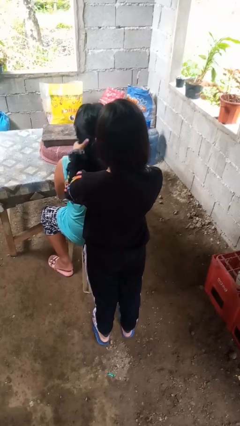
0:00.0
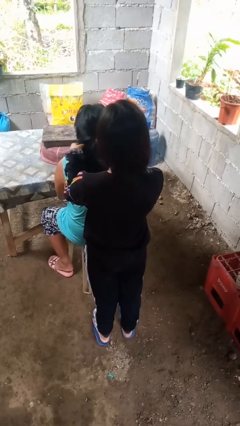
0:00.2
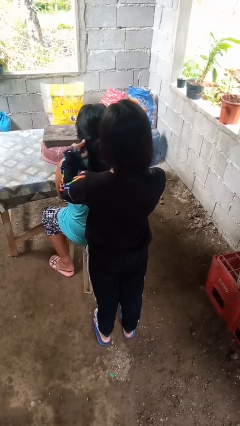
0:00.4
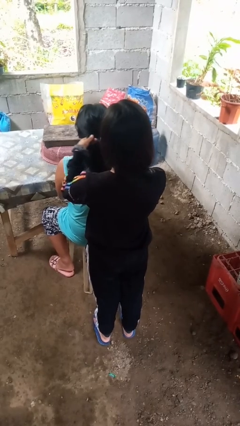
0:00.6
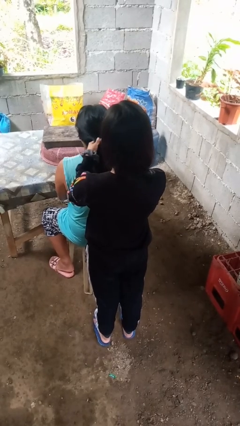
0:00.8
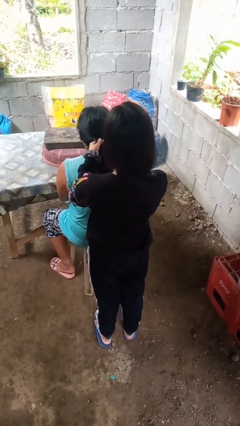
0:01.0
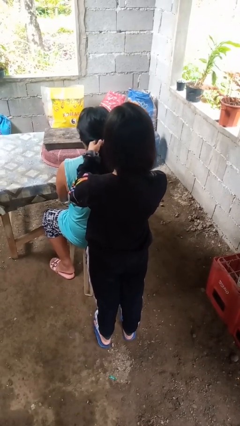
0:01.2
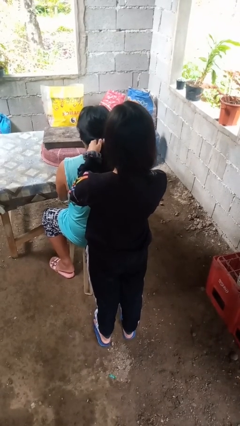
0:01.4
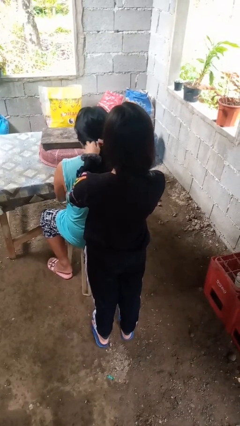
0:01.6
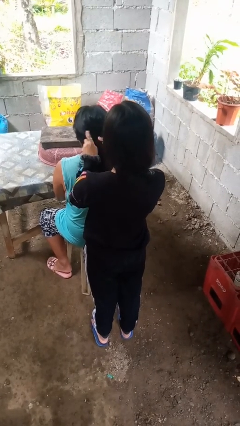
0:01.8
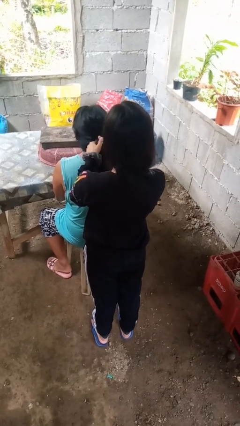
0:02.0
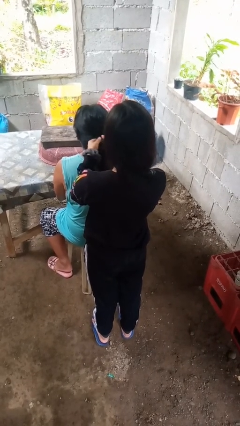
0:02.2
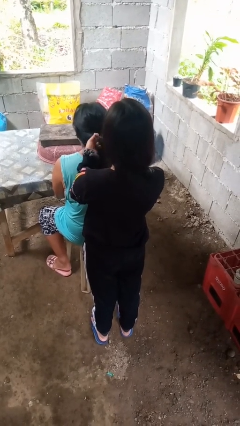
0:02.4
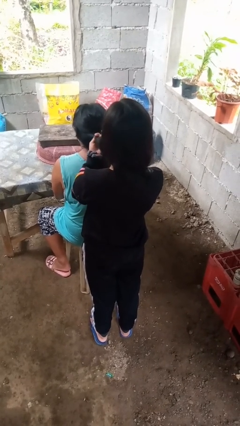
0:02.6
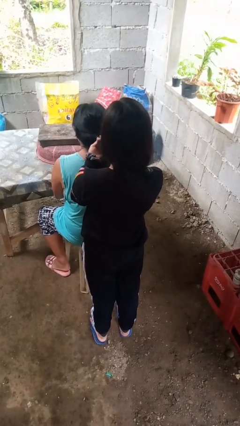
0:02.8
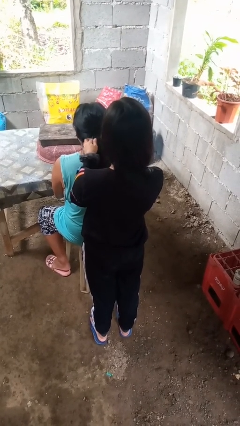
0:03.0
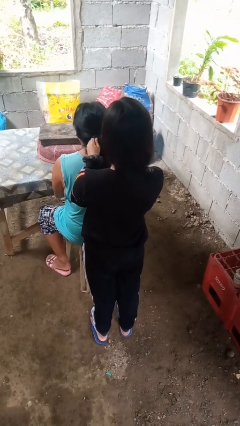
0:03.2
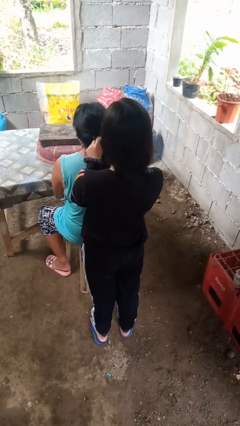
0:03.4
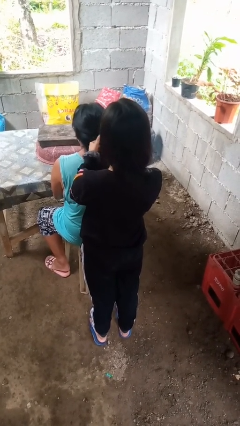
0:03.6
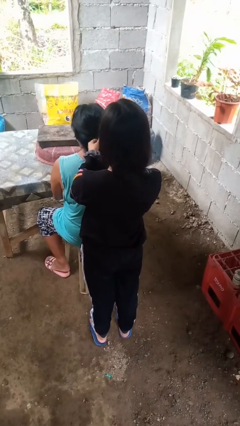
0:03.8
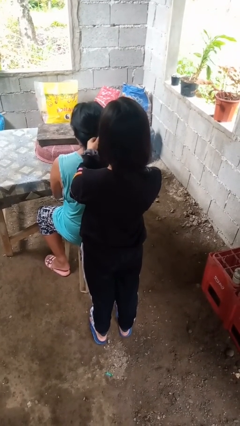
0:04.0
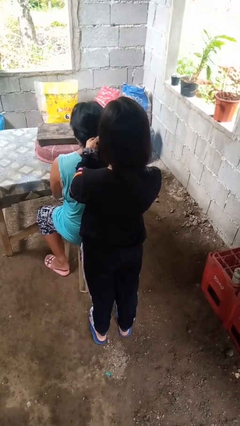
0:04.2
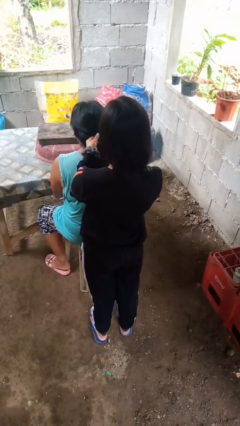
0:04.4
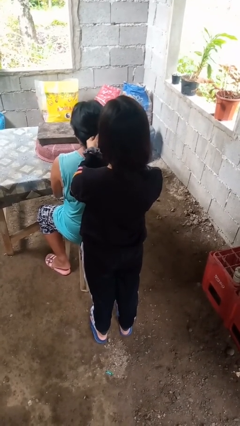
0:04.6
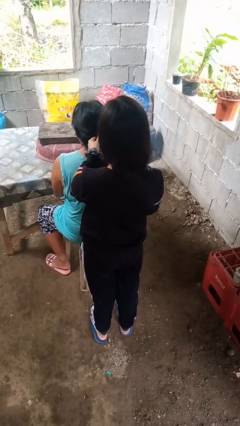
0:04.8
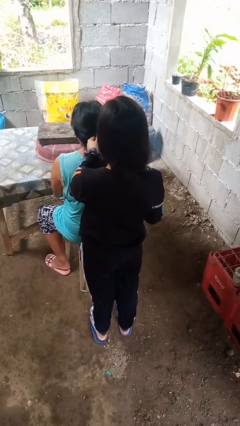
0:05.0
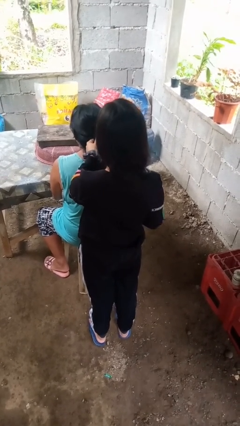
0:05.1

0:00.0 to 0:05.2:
person braids hair of person

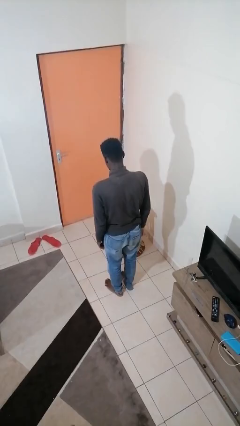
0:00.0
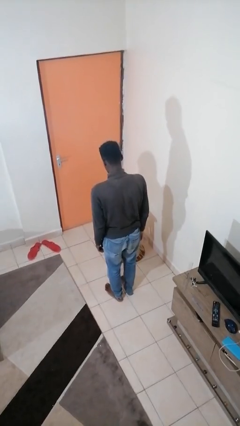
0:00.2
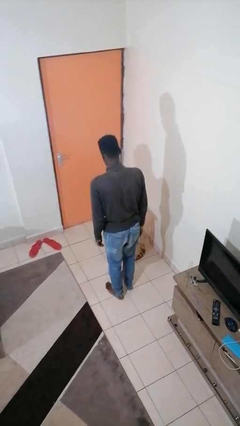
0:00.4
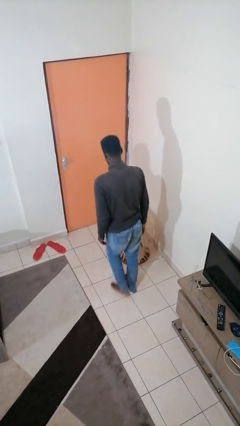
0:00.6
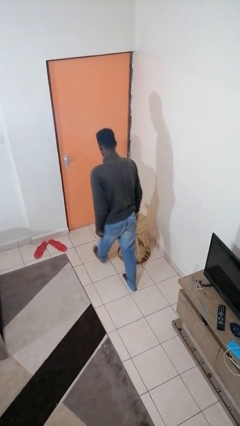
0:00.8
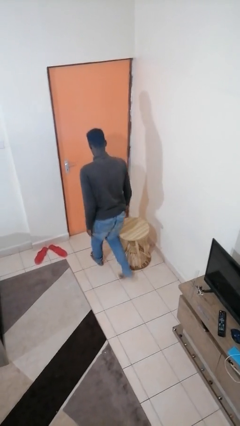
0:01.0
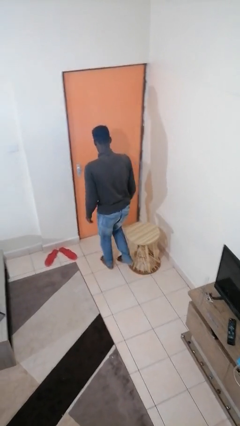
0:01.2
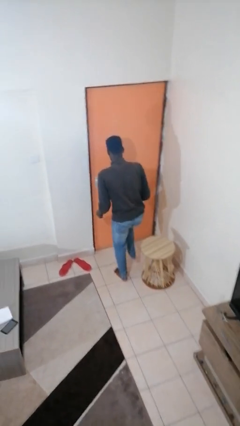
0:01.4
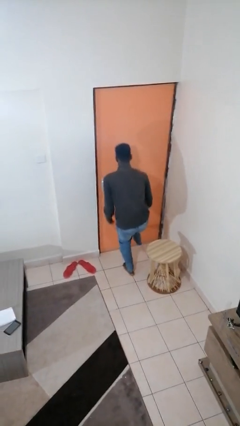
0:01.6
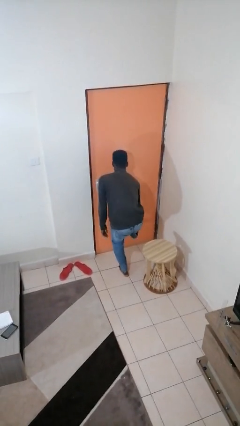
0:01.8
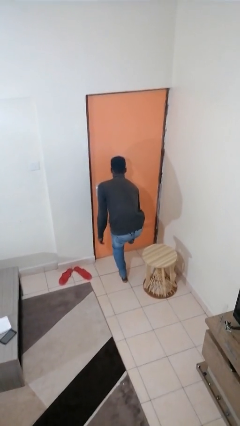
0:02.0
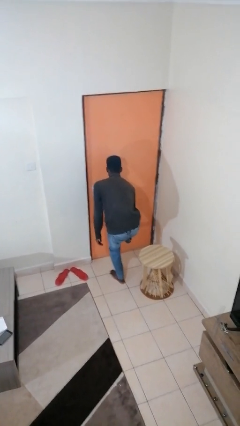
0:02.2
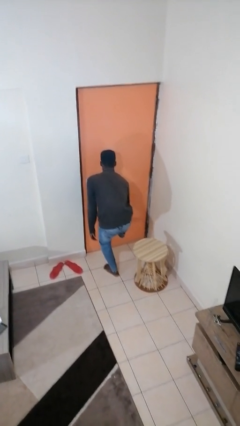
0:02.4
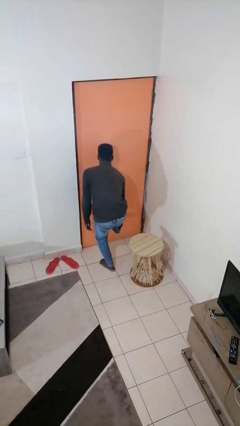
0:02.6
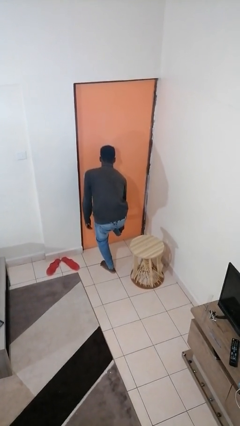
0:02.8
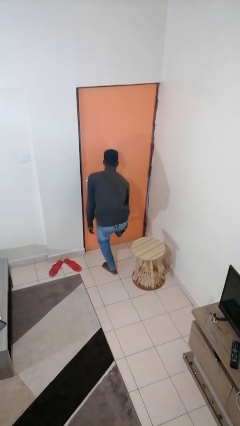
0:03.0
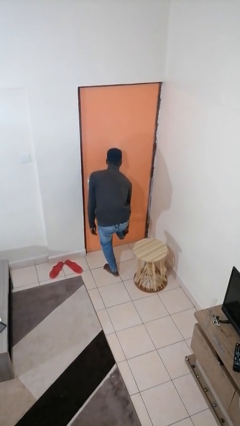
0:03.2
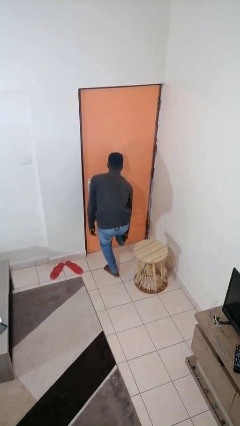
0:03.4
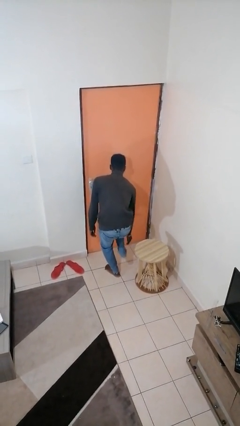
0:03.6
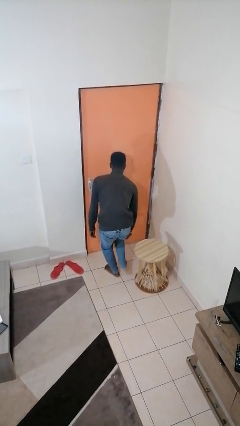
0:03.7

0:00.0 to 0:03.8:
person stubs toe

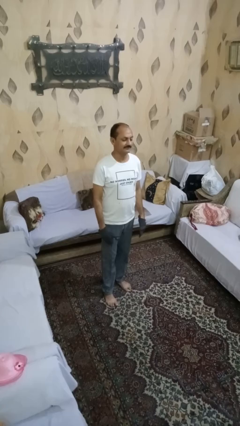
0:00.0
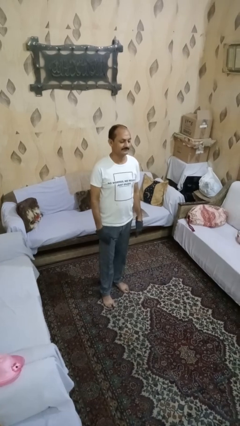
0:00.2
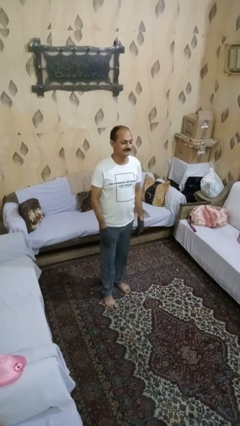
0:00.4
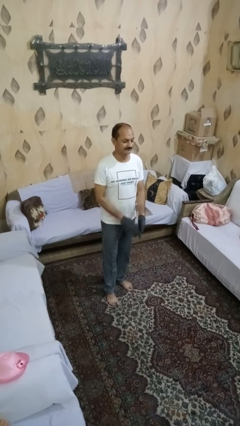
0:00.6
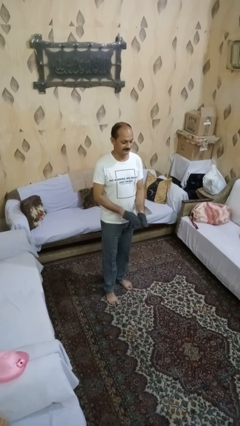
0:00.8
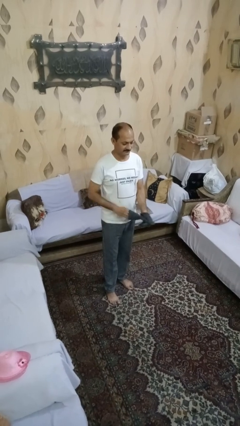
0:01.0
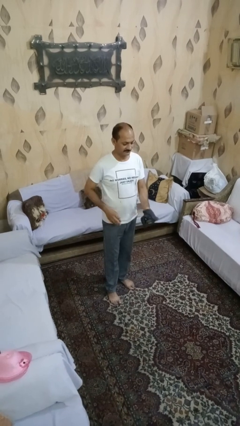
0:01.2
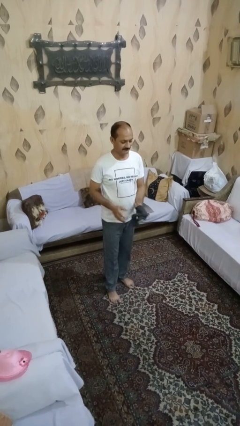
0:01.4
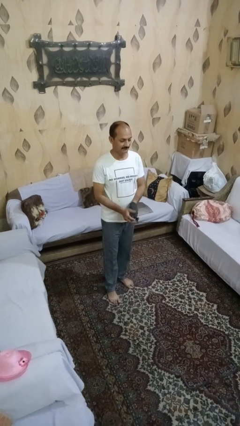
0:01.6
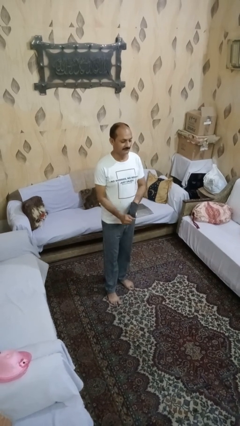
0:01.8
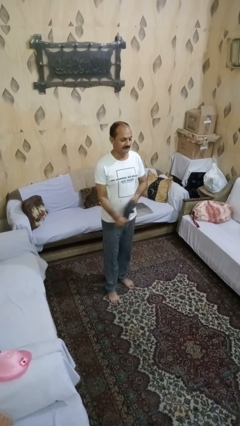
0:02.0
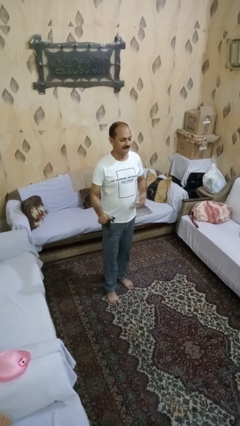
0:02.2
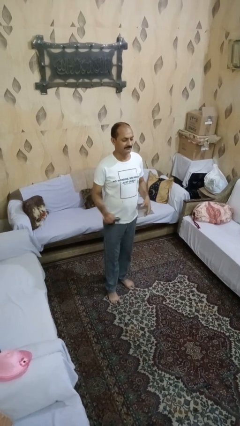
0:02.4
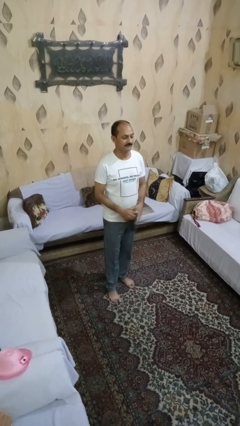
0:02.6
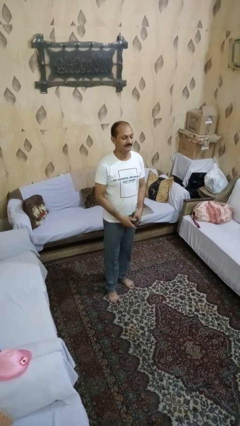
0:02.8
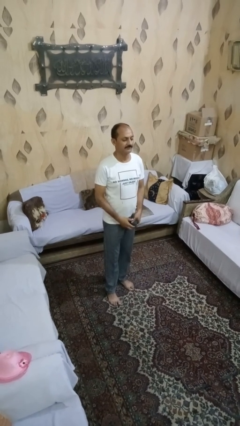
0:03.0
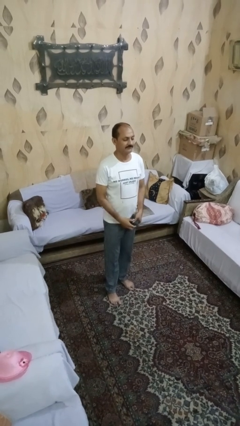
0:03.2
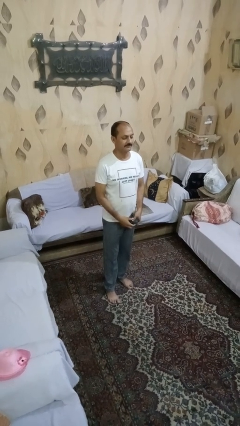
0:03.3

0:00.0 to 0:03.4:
person takes off gloves

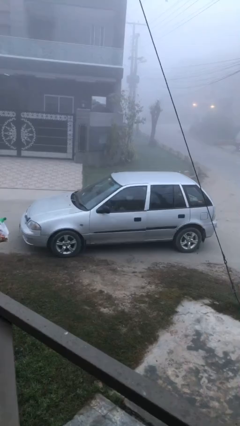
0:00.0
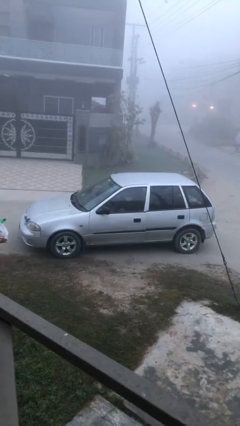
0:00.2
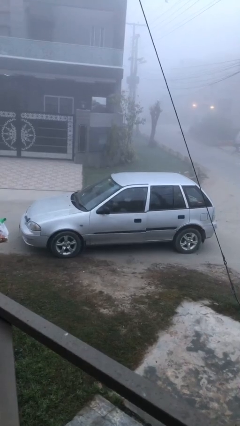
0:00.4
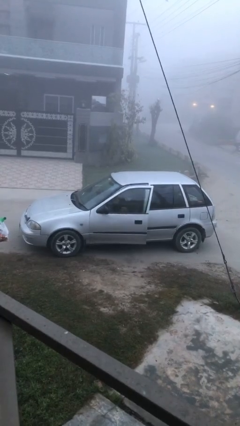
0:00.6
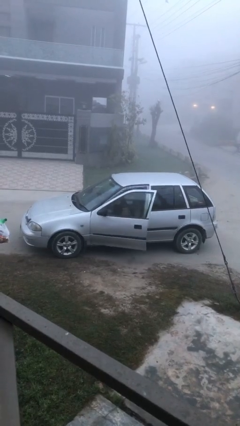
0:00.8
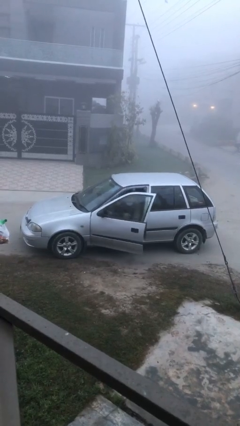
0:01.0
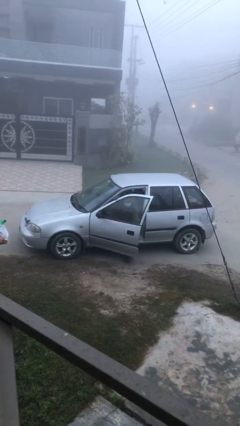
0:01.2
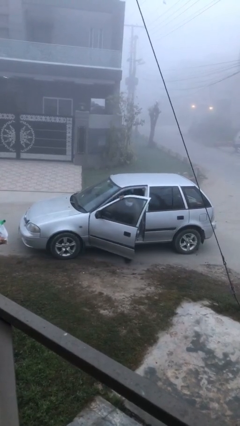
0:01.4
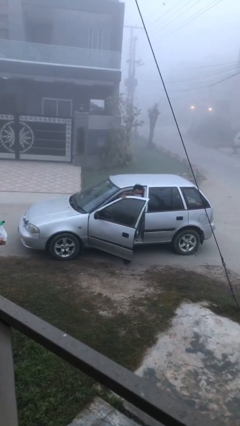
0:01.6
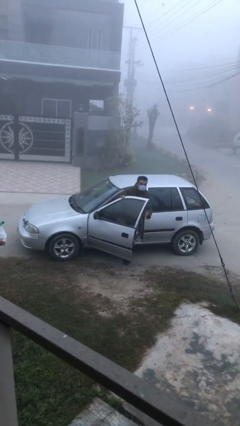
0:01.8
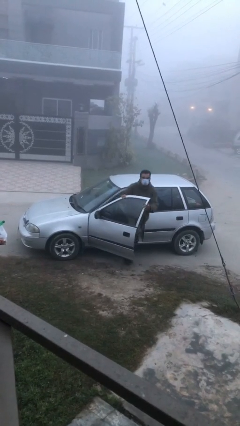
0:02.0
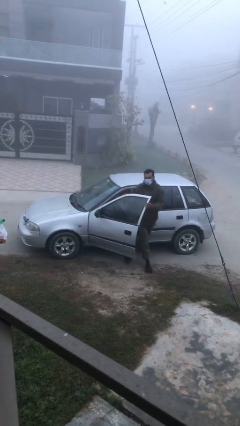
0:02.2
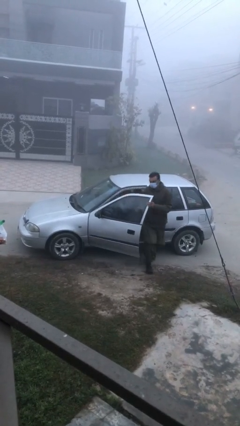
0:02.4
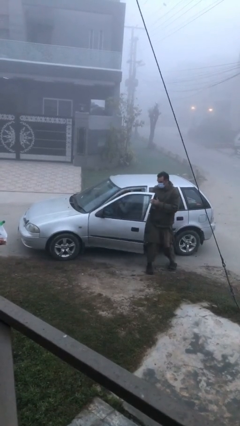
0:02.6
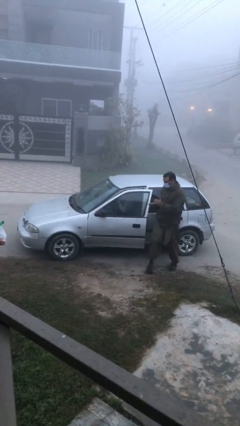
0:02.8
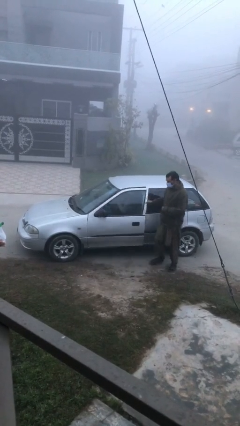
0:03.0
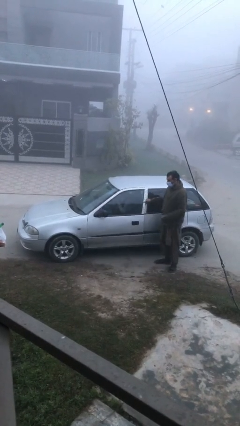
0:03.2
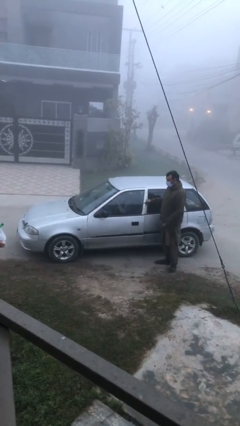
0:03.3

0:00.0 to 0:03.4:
car drops off person

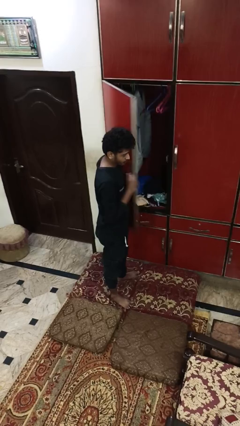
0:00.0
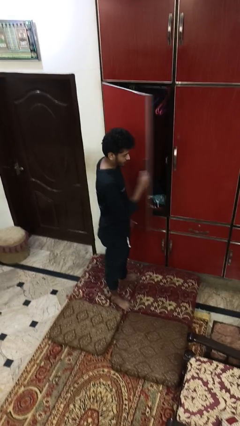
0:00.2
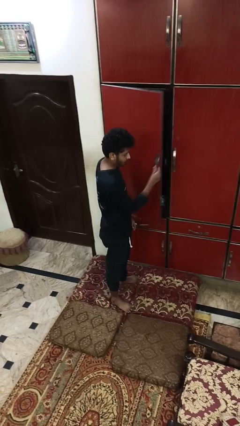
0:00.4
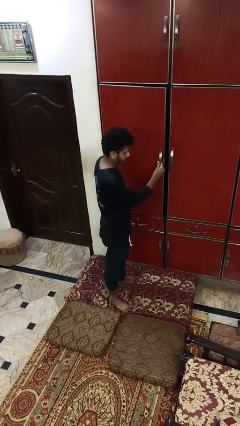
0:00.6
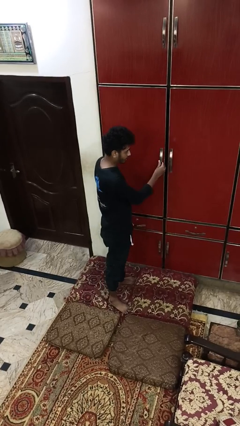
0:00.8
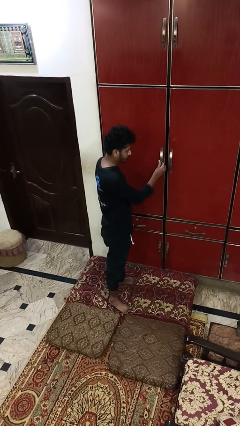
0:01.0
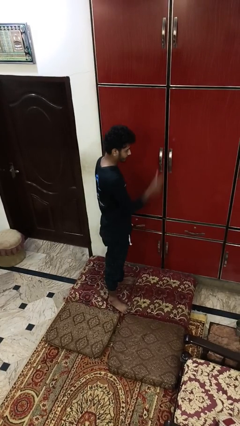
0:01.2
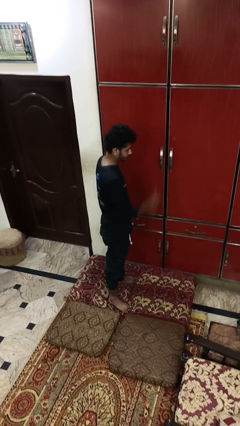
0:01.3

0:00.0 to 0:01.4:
person closes closet door

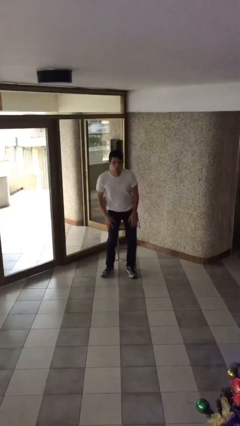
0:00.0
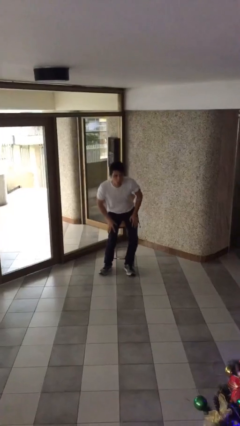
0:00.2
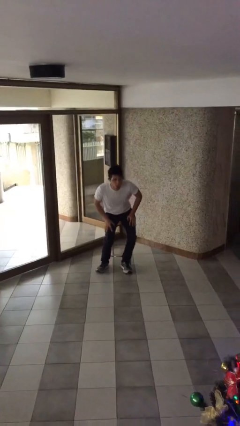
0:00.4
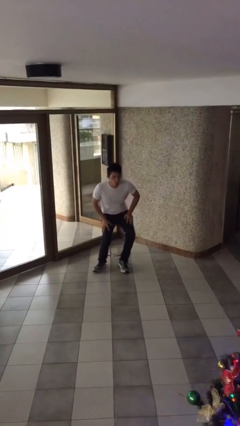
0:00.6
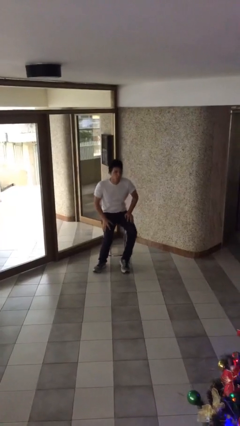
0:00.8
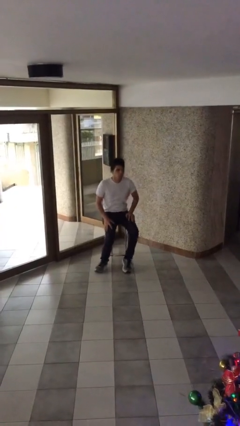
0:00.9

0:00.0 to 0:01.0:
person sits down
